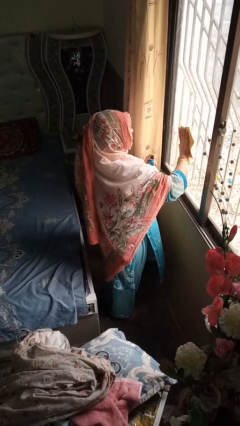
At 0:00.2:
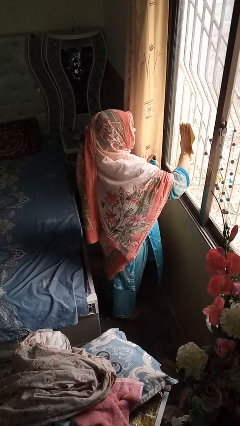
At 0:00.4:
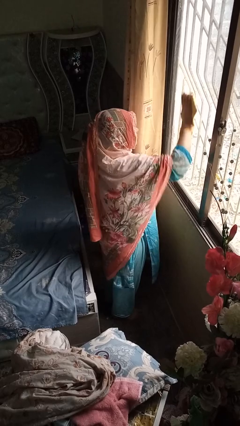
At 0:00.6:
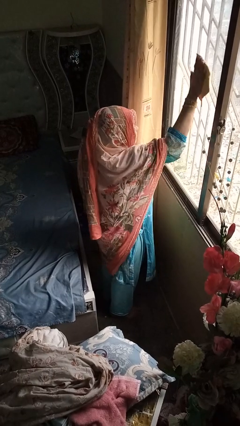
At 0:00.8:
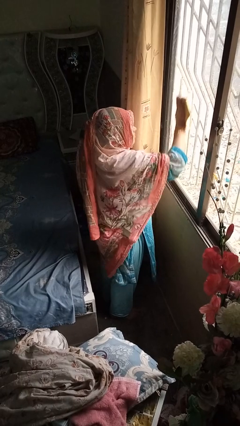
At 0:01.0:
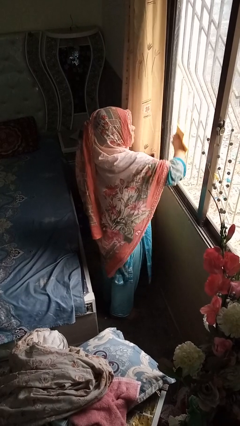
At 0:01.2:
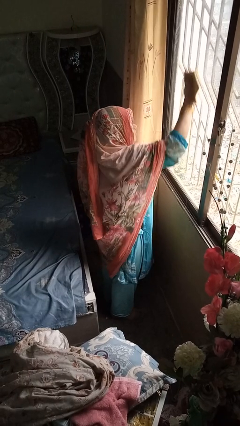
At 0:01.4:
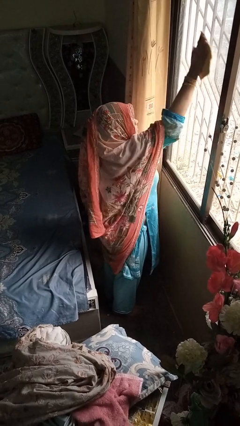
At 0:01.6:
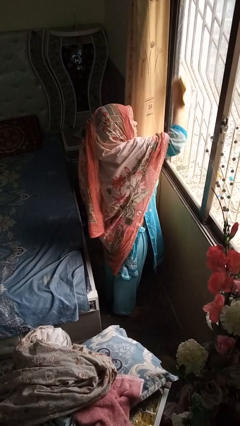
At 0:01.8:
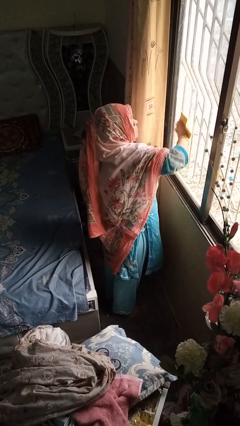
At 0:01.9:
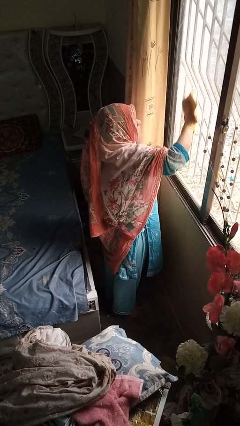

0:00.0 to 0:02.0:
person washes window

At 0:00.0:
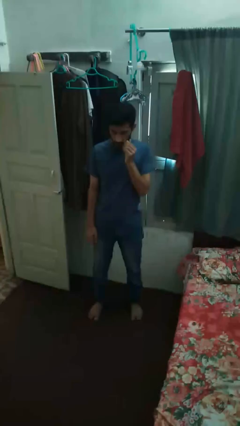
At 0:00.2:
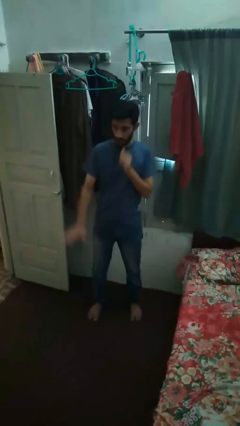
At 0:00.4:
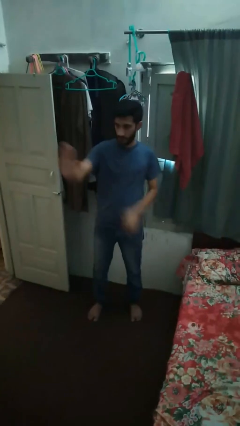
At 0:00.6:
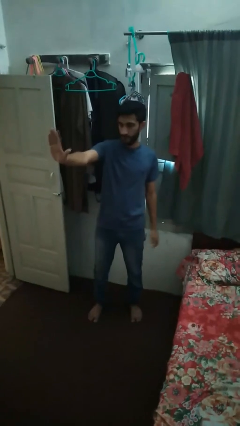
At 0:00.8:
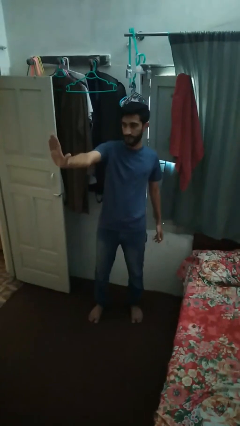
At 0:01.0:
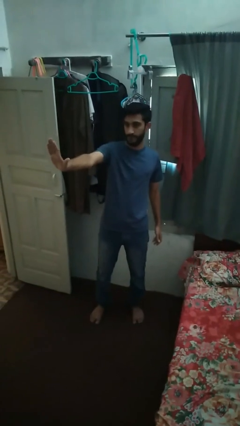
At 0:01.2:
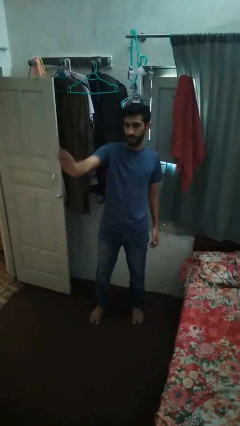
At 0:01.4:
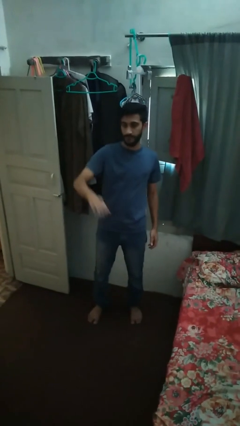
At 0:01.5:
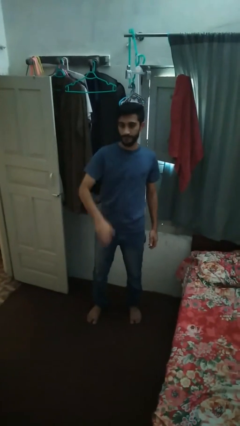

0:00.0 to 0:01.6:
person gestures stop

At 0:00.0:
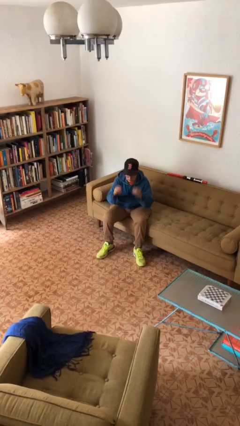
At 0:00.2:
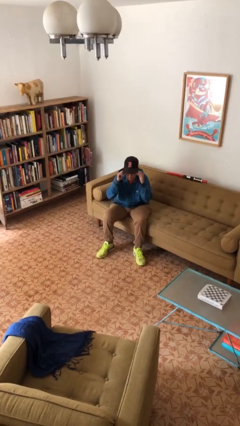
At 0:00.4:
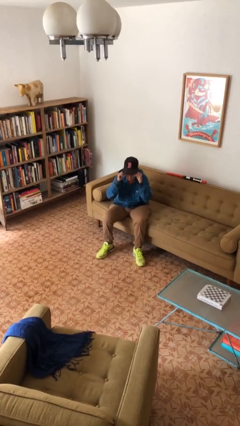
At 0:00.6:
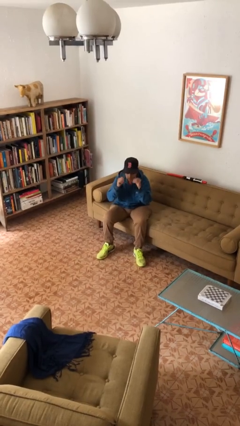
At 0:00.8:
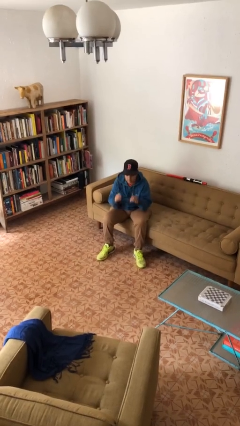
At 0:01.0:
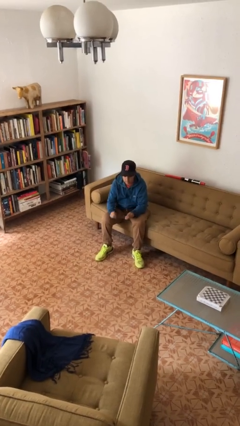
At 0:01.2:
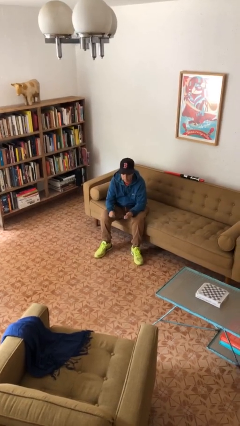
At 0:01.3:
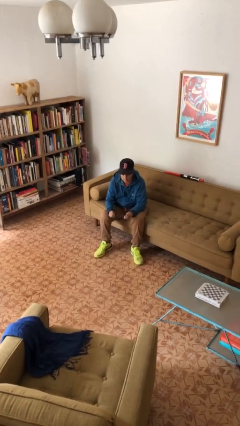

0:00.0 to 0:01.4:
person takes off glasses

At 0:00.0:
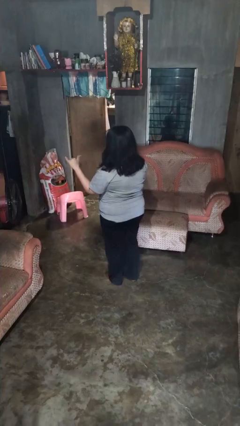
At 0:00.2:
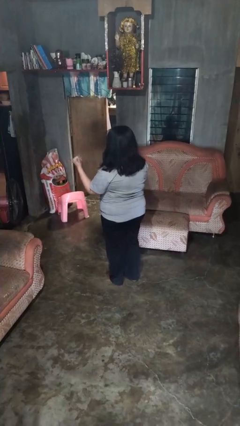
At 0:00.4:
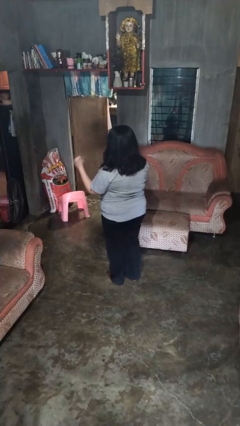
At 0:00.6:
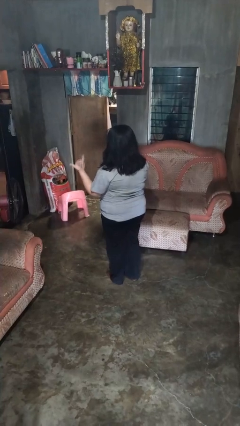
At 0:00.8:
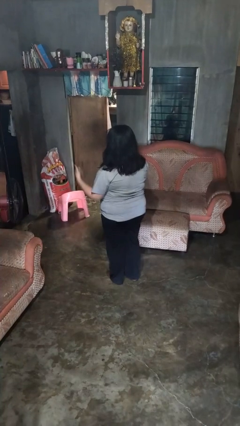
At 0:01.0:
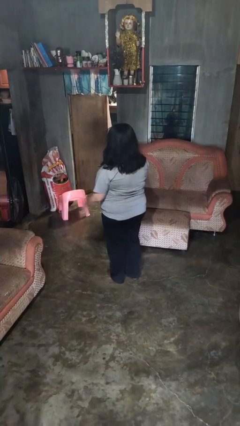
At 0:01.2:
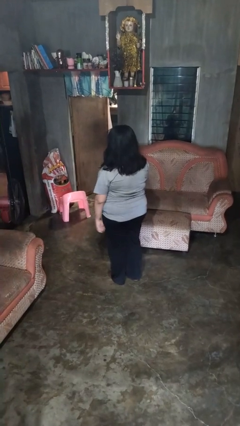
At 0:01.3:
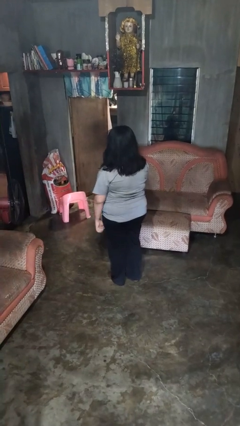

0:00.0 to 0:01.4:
person gestures hang loose

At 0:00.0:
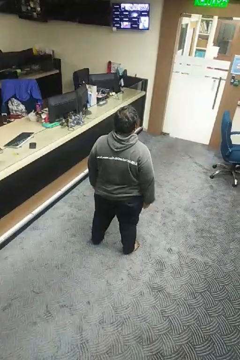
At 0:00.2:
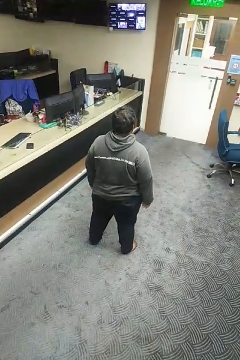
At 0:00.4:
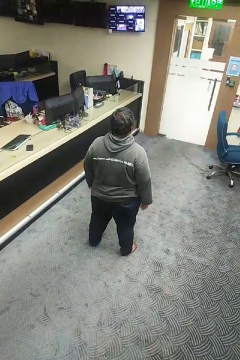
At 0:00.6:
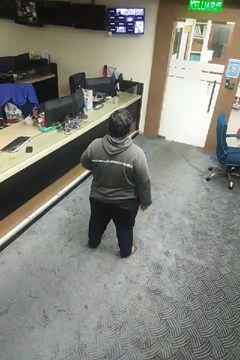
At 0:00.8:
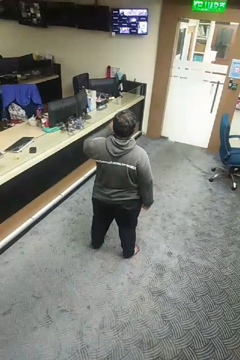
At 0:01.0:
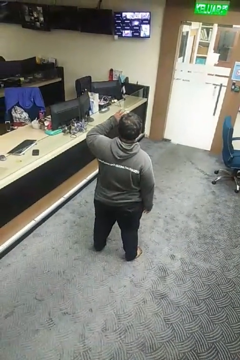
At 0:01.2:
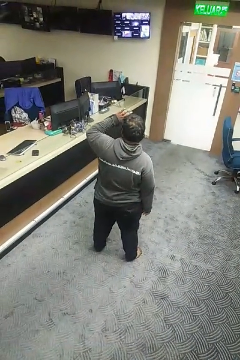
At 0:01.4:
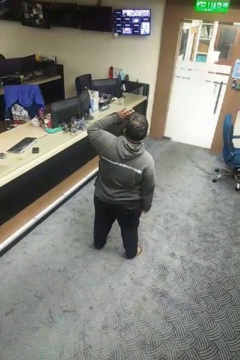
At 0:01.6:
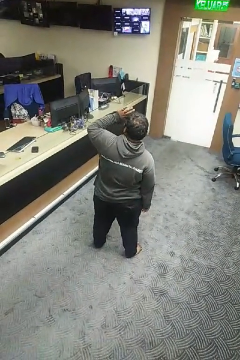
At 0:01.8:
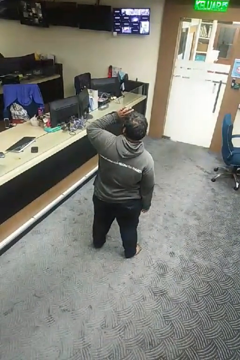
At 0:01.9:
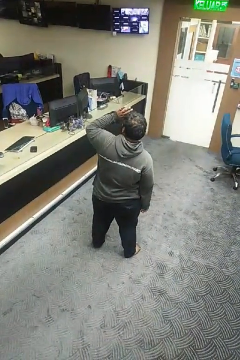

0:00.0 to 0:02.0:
person shades eyes

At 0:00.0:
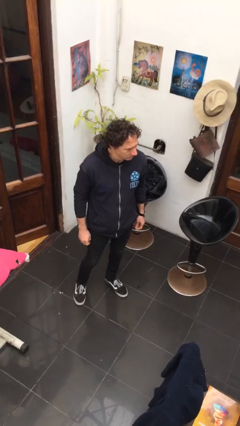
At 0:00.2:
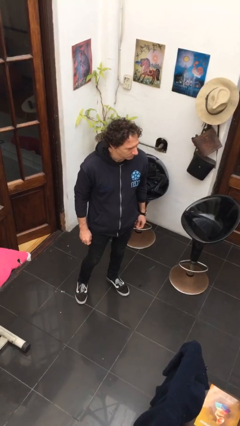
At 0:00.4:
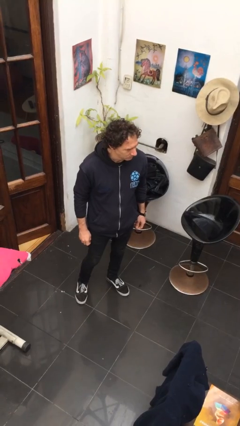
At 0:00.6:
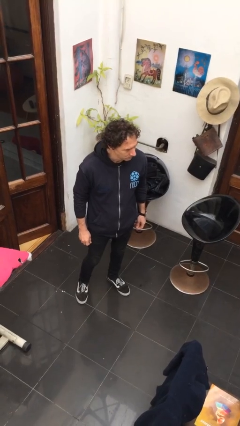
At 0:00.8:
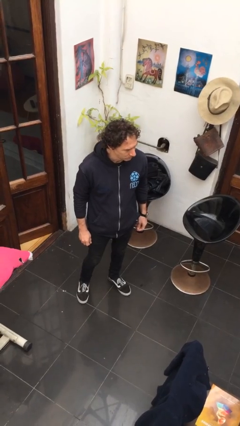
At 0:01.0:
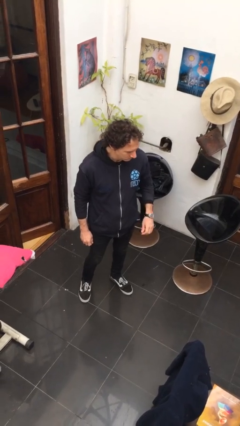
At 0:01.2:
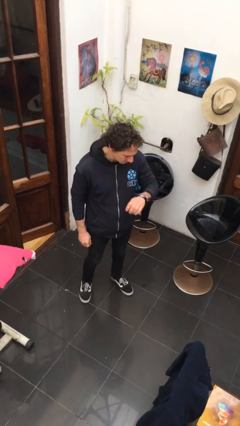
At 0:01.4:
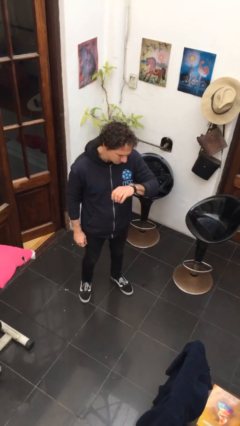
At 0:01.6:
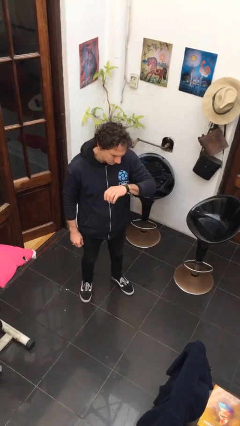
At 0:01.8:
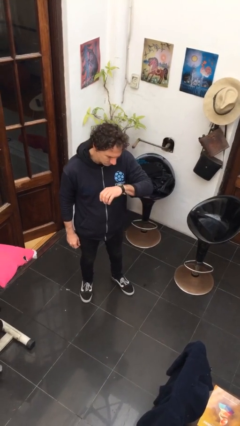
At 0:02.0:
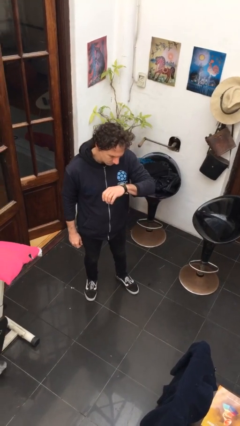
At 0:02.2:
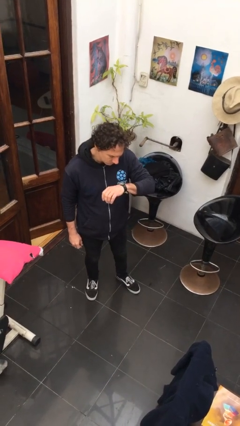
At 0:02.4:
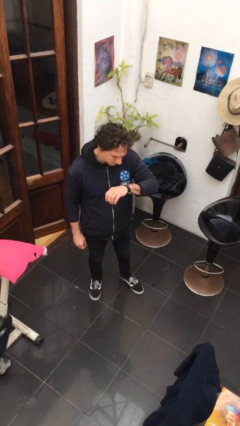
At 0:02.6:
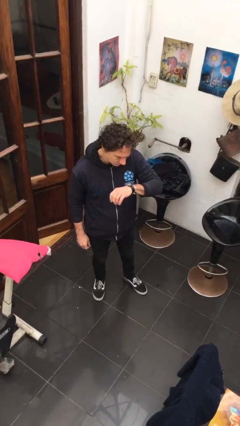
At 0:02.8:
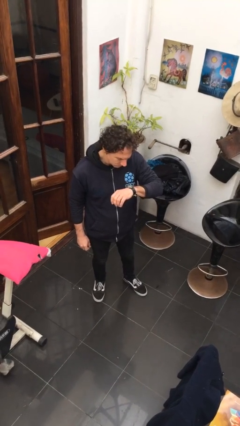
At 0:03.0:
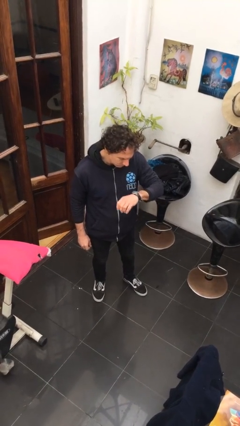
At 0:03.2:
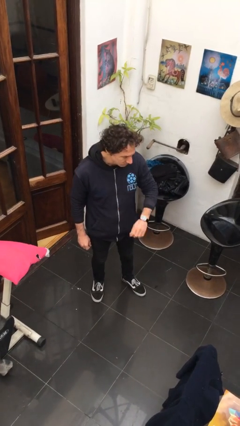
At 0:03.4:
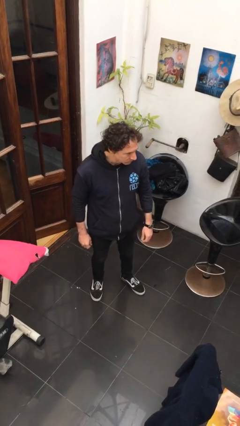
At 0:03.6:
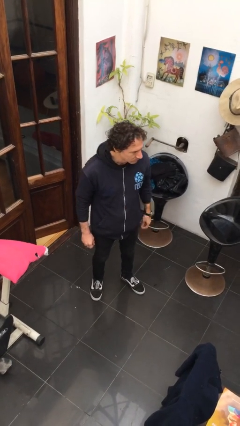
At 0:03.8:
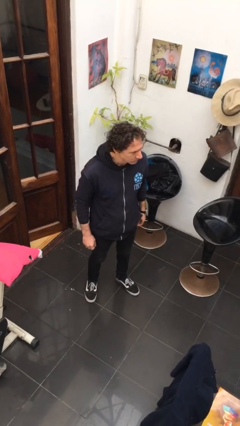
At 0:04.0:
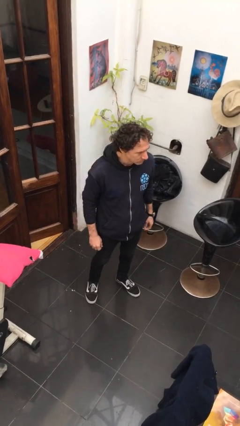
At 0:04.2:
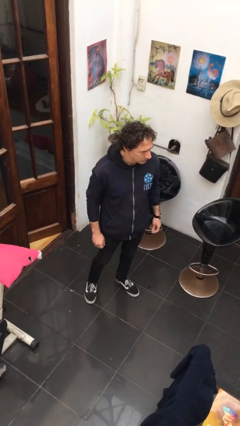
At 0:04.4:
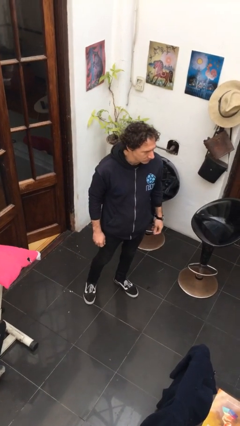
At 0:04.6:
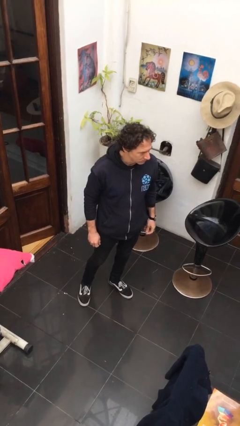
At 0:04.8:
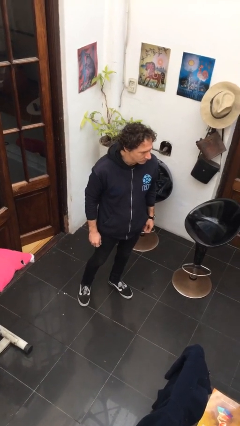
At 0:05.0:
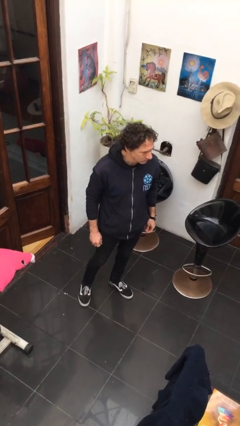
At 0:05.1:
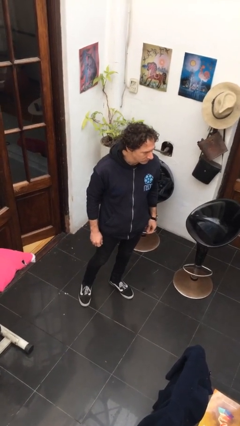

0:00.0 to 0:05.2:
person looks at wristwatch

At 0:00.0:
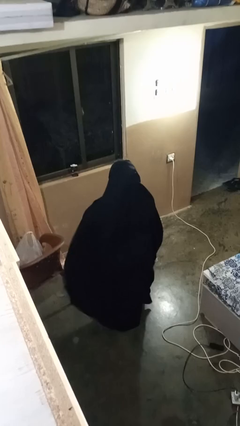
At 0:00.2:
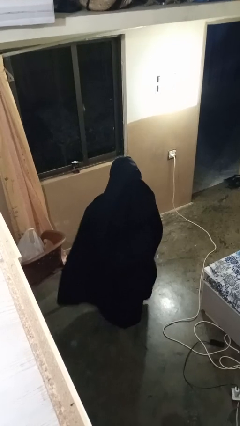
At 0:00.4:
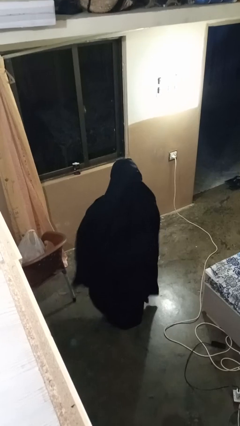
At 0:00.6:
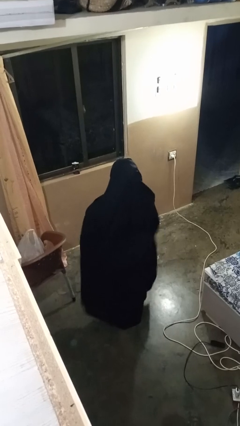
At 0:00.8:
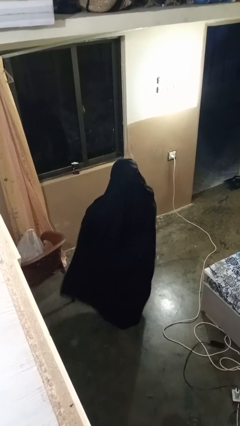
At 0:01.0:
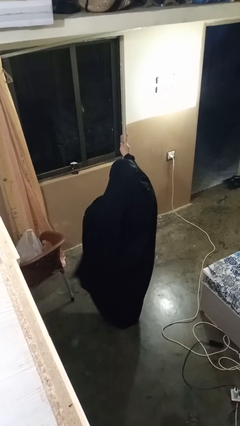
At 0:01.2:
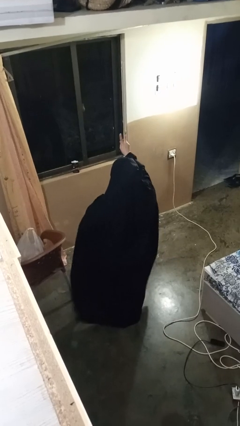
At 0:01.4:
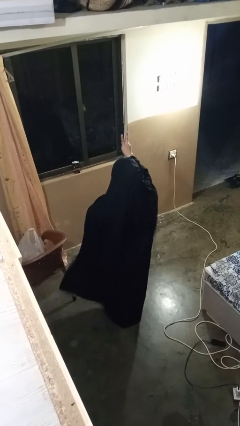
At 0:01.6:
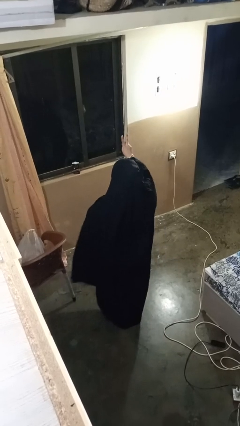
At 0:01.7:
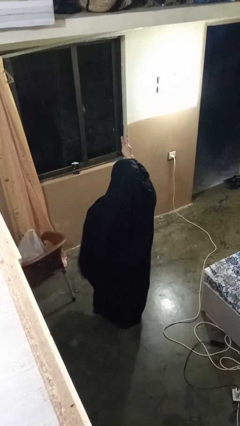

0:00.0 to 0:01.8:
person gestures peace

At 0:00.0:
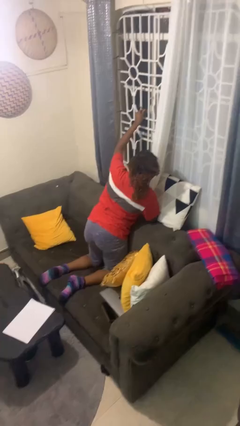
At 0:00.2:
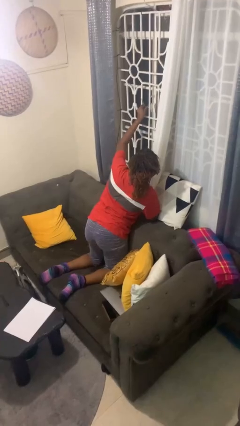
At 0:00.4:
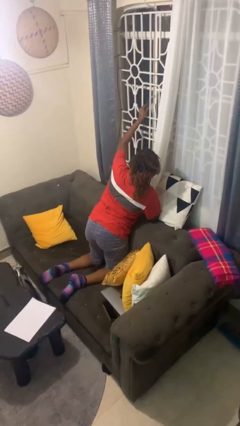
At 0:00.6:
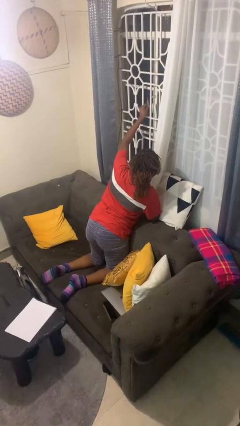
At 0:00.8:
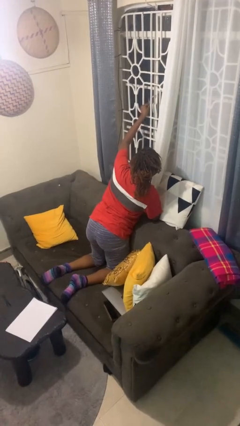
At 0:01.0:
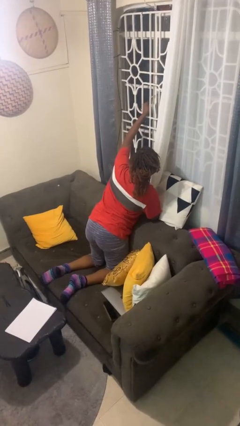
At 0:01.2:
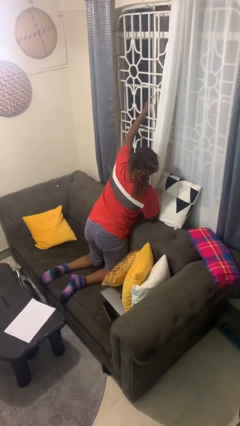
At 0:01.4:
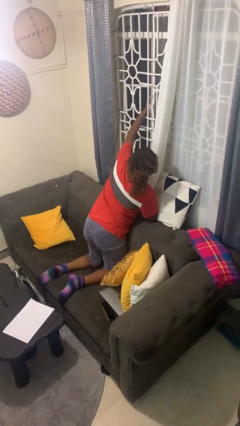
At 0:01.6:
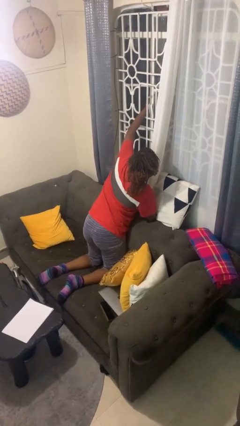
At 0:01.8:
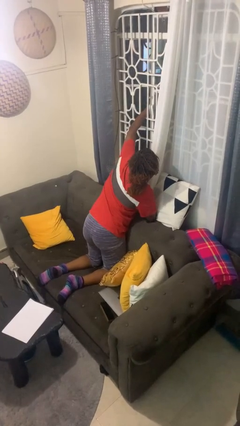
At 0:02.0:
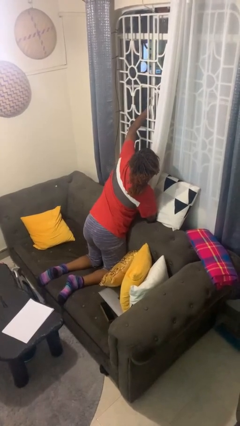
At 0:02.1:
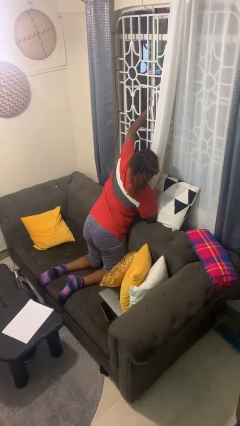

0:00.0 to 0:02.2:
person opens home window
